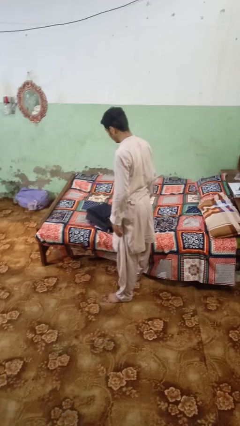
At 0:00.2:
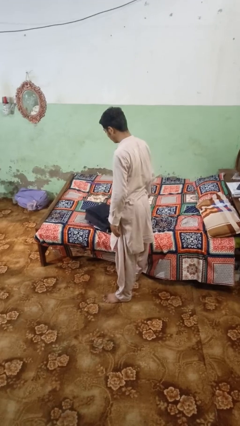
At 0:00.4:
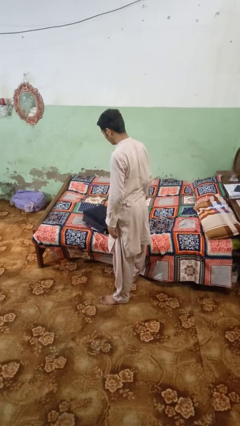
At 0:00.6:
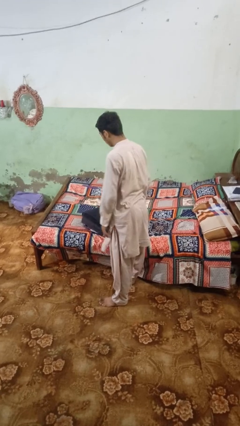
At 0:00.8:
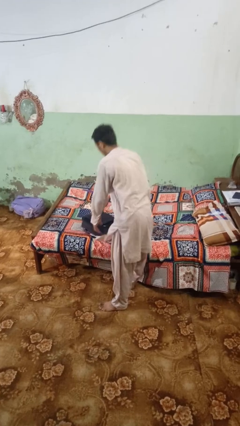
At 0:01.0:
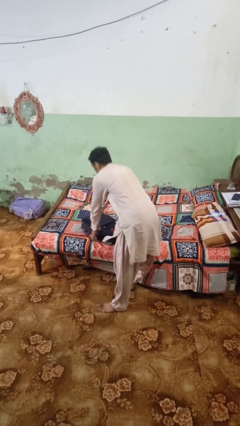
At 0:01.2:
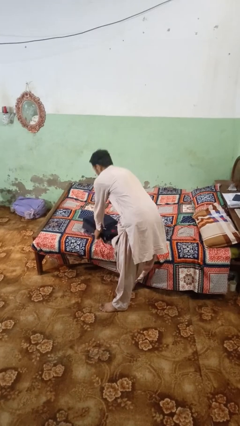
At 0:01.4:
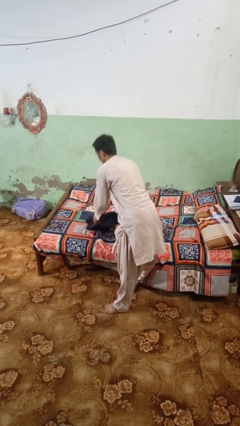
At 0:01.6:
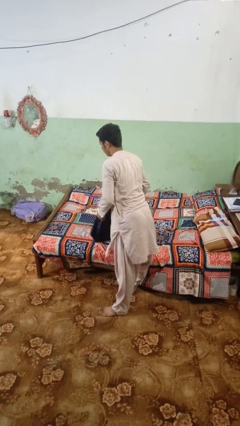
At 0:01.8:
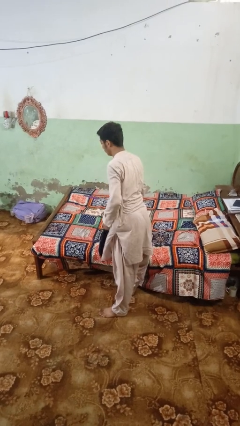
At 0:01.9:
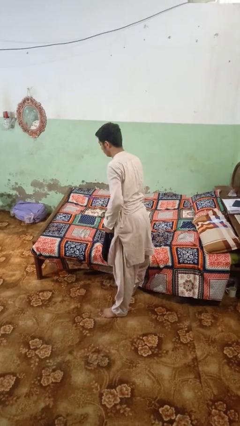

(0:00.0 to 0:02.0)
person picks up object from bed

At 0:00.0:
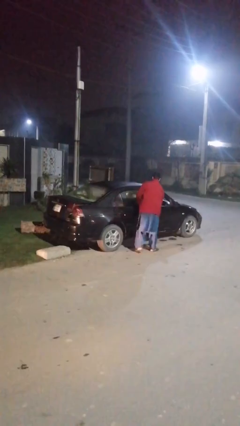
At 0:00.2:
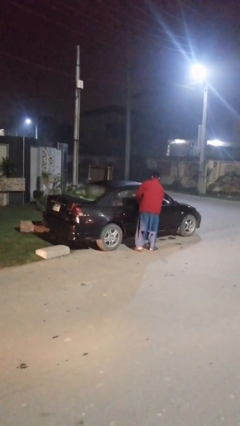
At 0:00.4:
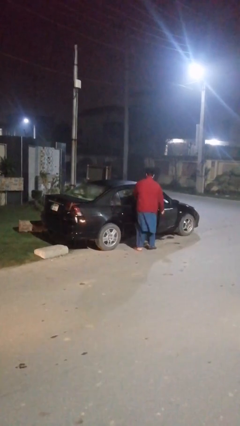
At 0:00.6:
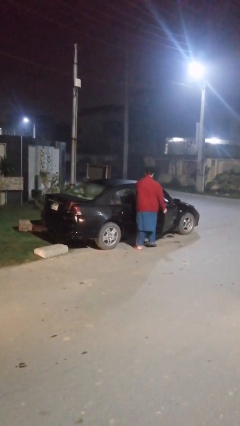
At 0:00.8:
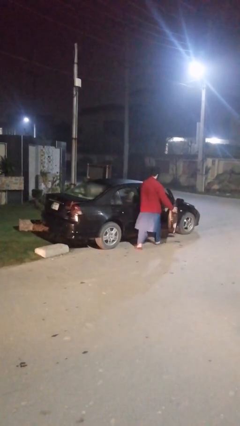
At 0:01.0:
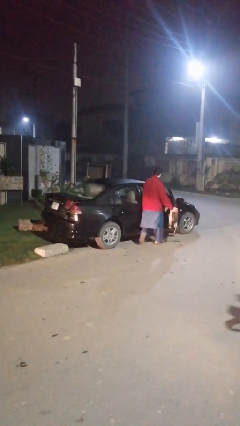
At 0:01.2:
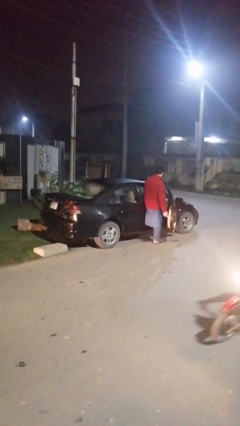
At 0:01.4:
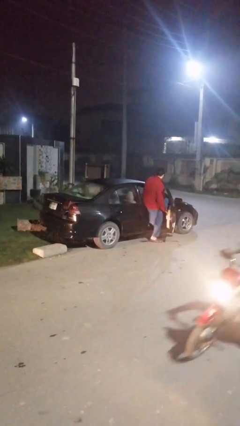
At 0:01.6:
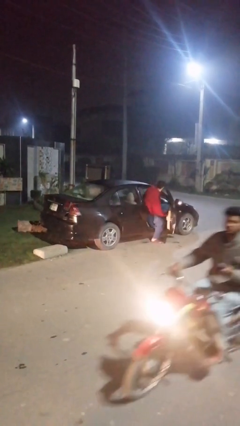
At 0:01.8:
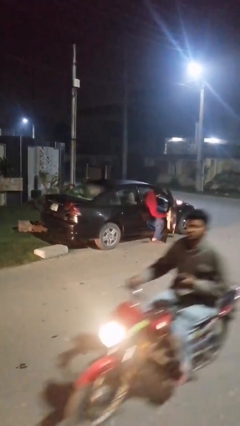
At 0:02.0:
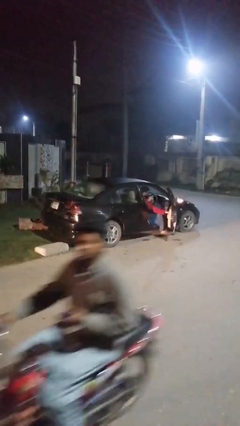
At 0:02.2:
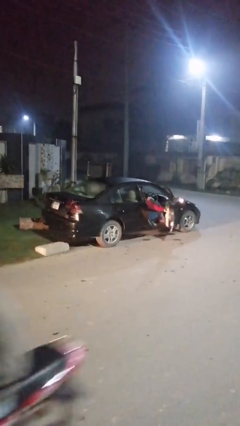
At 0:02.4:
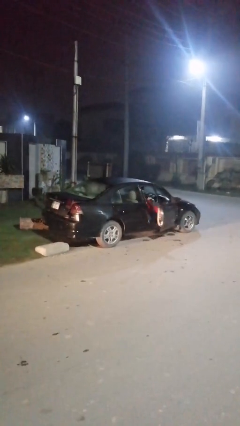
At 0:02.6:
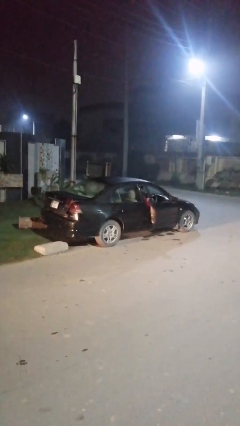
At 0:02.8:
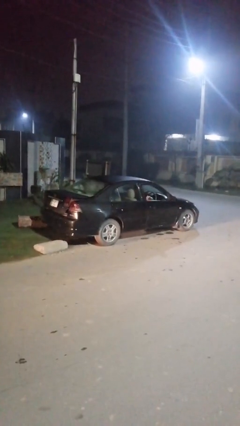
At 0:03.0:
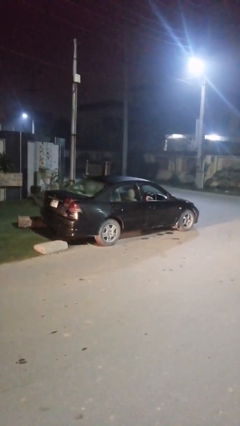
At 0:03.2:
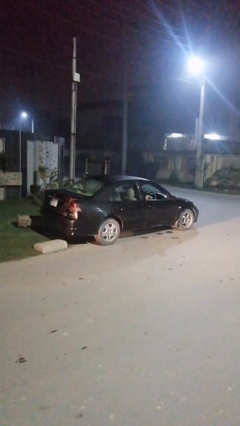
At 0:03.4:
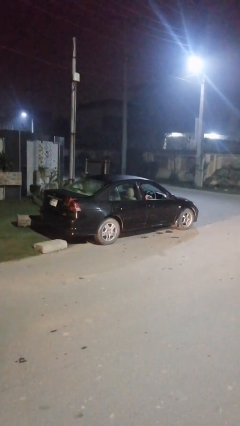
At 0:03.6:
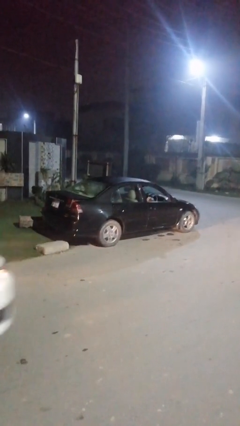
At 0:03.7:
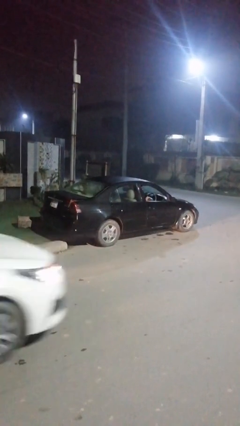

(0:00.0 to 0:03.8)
car picks up person

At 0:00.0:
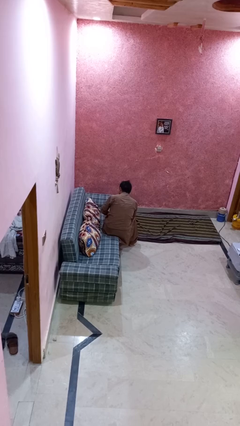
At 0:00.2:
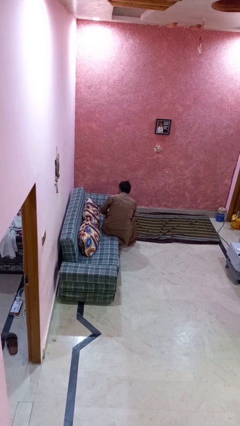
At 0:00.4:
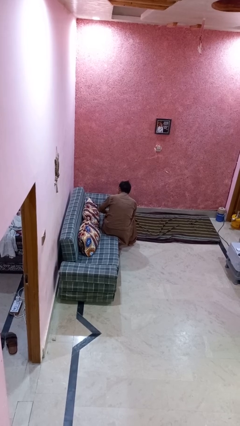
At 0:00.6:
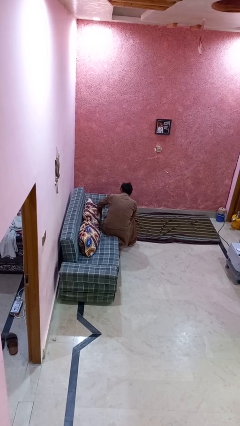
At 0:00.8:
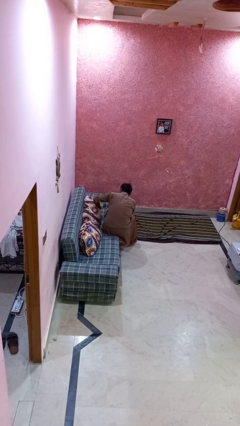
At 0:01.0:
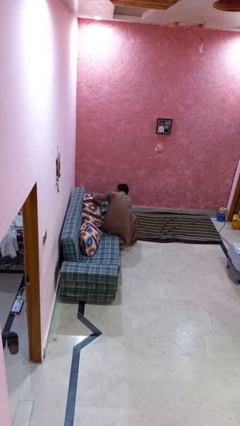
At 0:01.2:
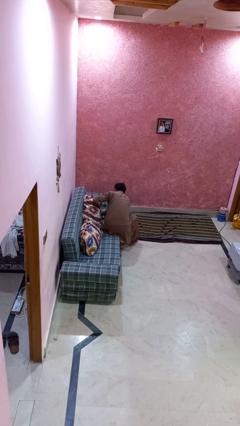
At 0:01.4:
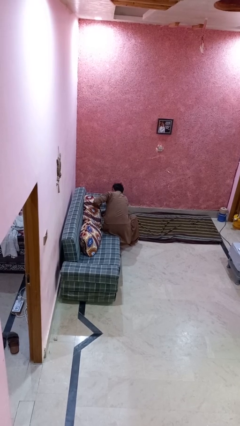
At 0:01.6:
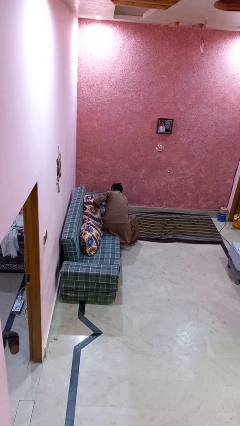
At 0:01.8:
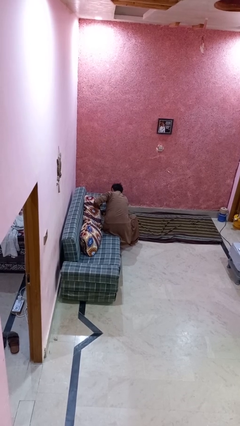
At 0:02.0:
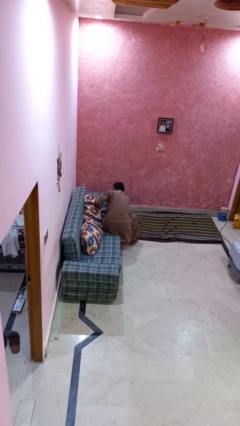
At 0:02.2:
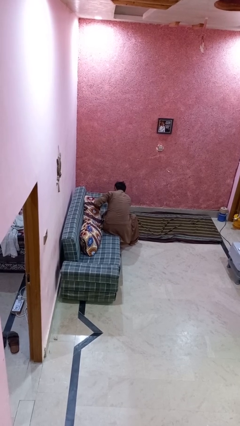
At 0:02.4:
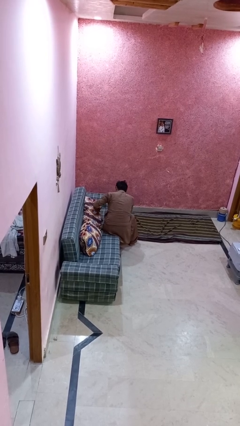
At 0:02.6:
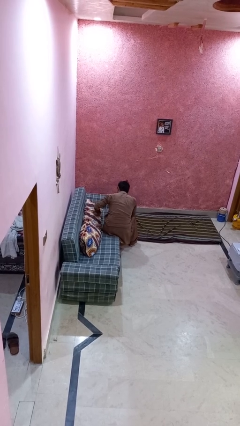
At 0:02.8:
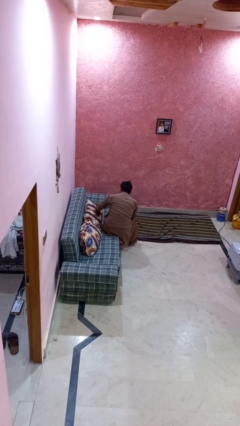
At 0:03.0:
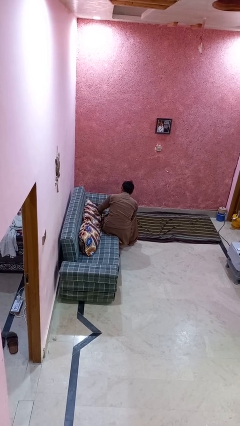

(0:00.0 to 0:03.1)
person searches in couch

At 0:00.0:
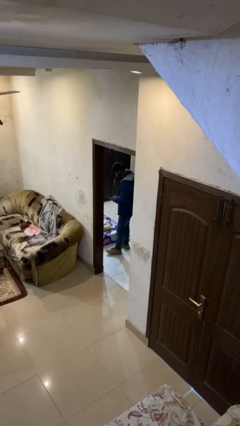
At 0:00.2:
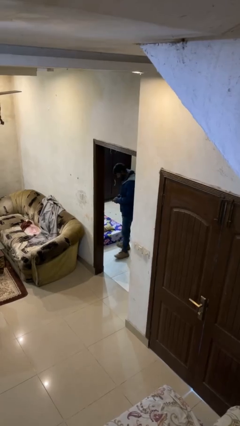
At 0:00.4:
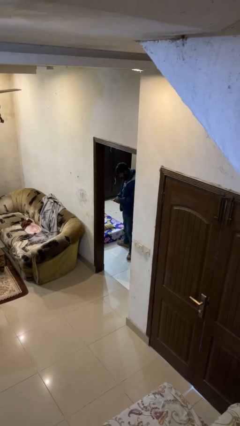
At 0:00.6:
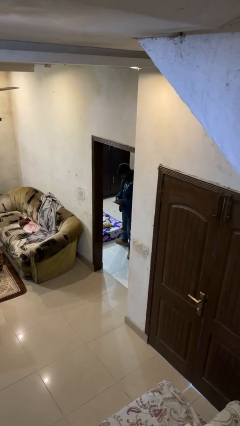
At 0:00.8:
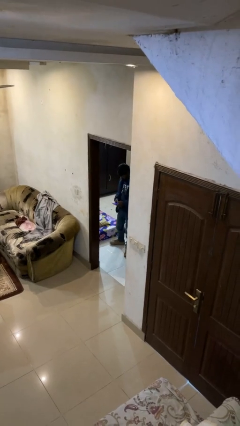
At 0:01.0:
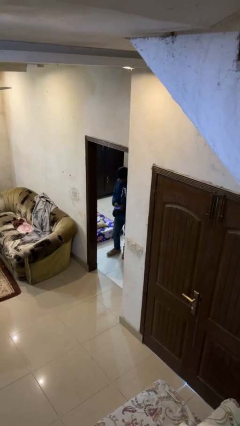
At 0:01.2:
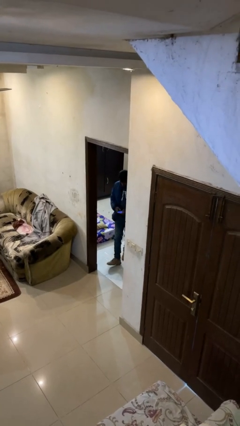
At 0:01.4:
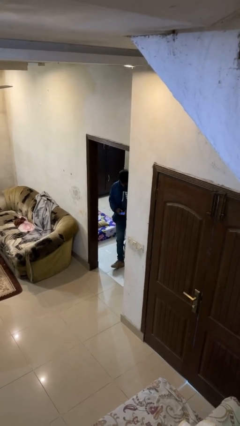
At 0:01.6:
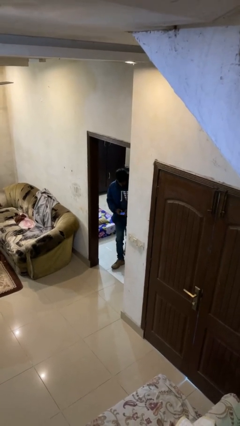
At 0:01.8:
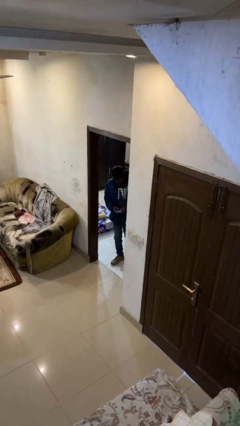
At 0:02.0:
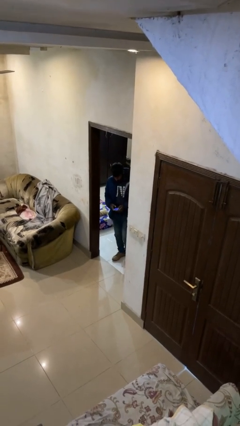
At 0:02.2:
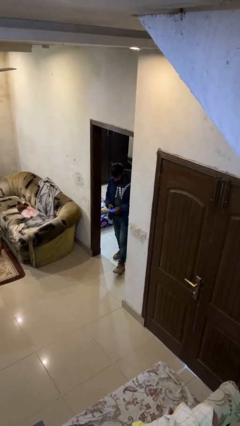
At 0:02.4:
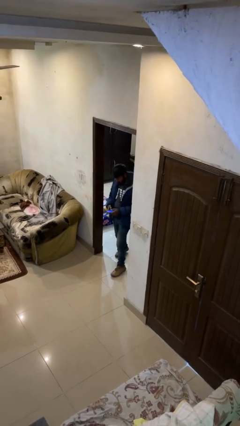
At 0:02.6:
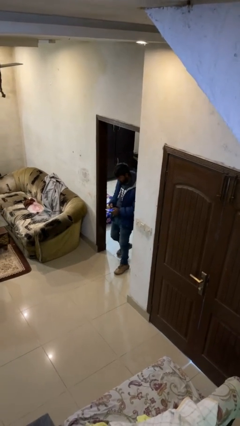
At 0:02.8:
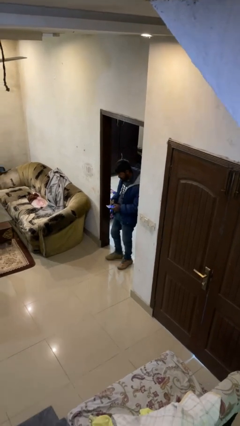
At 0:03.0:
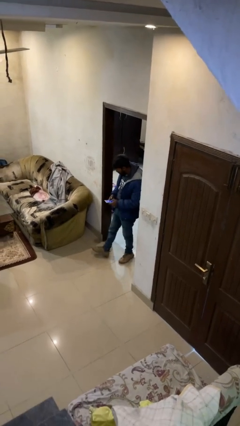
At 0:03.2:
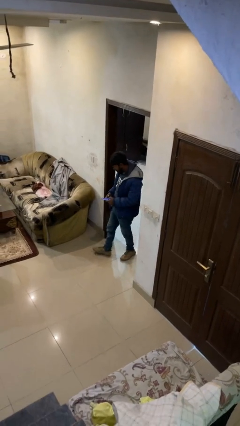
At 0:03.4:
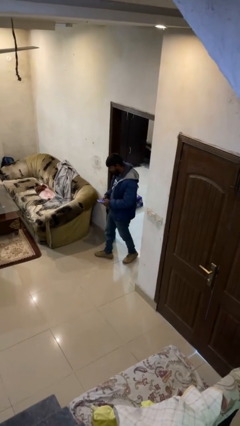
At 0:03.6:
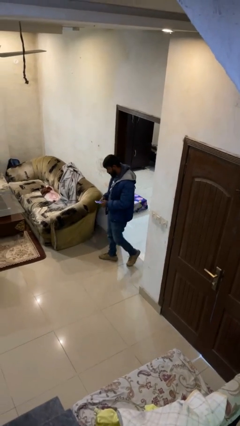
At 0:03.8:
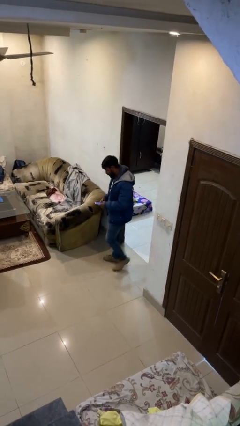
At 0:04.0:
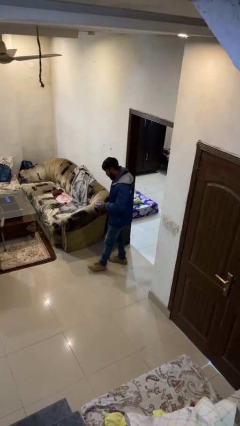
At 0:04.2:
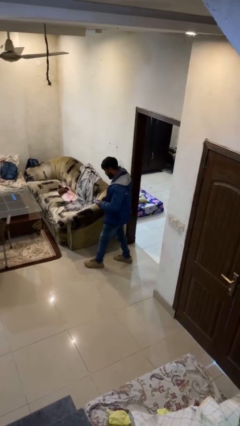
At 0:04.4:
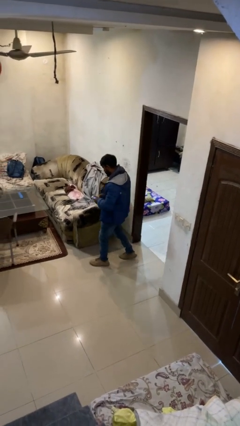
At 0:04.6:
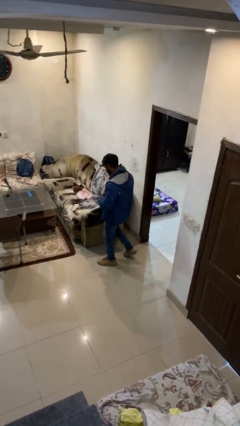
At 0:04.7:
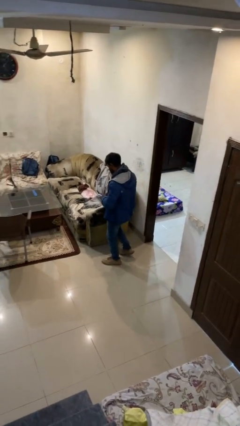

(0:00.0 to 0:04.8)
person enters scene through structure

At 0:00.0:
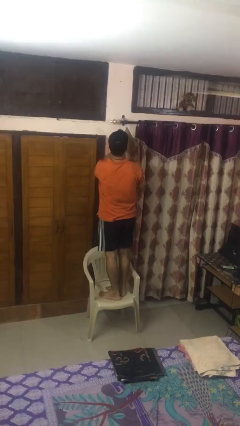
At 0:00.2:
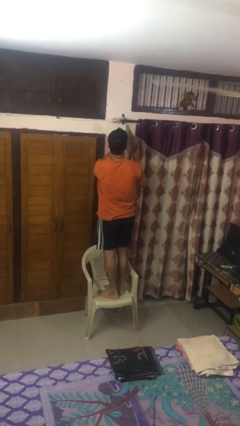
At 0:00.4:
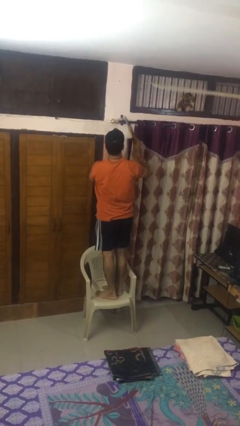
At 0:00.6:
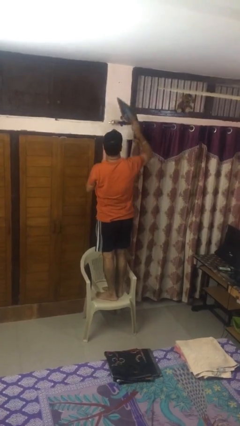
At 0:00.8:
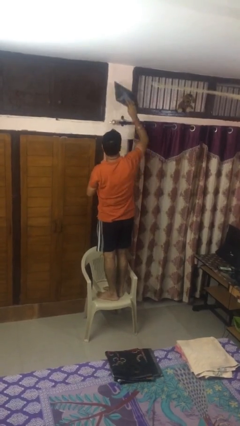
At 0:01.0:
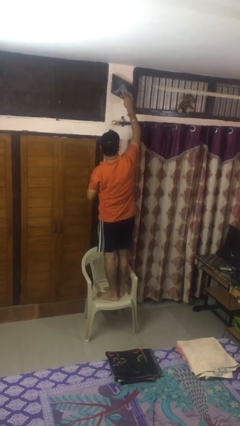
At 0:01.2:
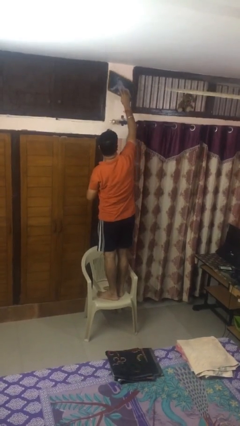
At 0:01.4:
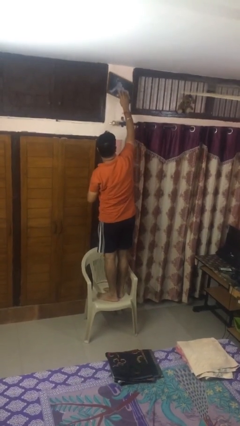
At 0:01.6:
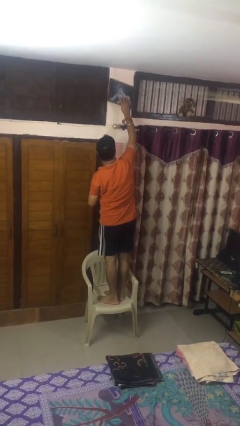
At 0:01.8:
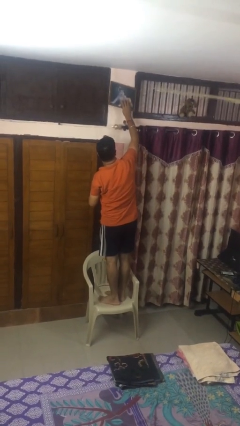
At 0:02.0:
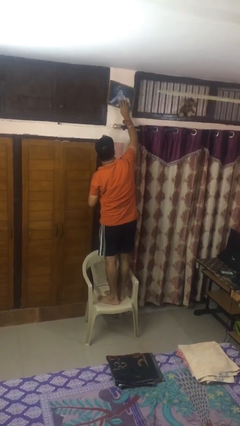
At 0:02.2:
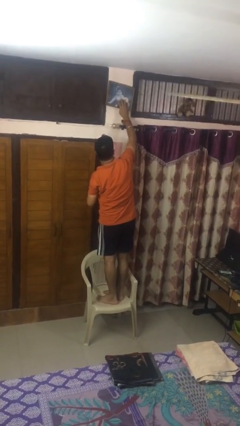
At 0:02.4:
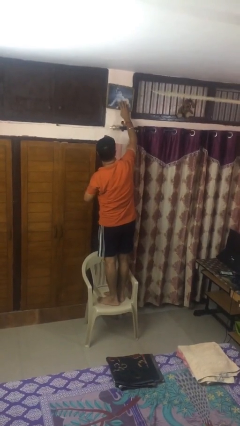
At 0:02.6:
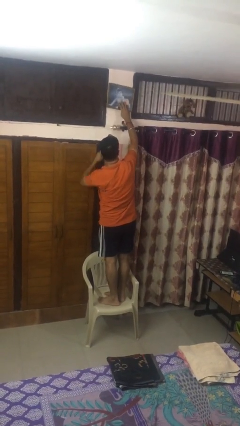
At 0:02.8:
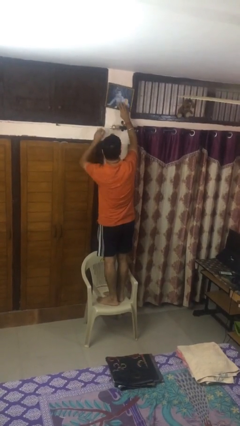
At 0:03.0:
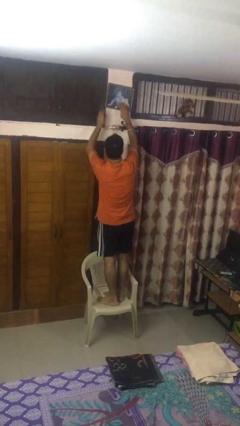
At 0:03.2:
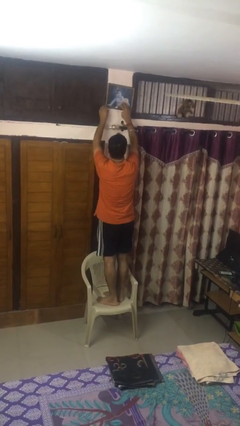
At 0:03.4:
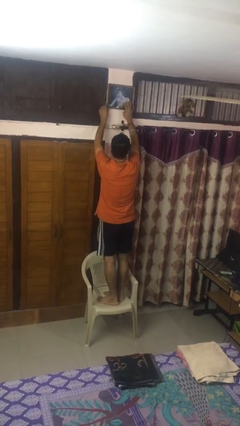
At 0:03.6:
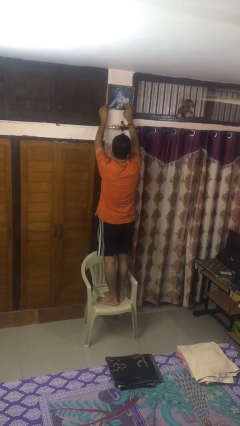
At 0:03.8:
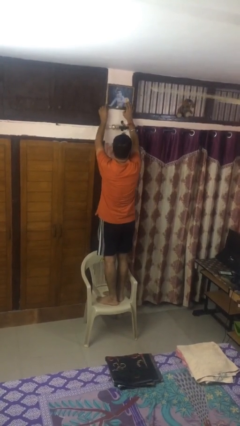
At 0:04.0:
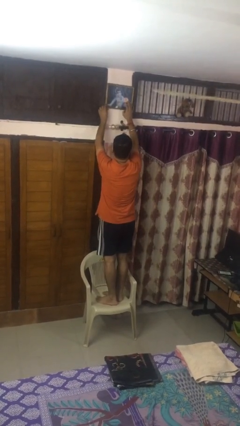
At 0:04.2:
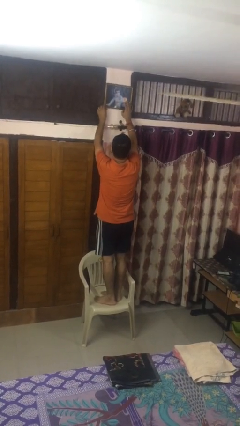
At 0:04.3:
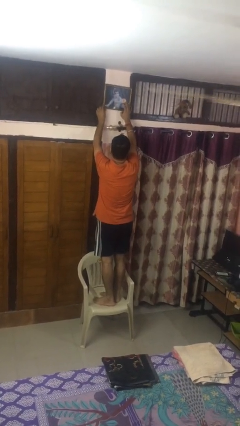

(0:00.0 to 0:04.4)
person puts up picture frame
